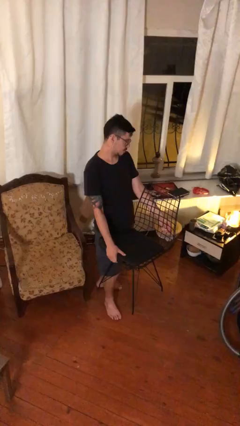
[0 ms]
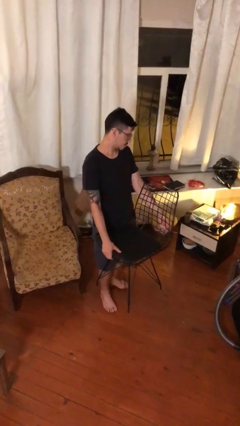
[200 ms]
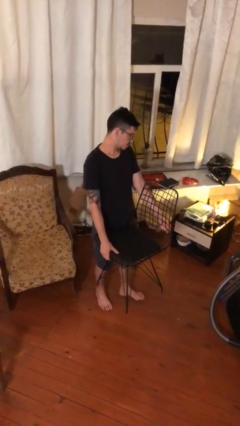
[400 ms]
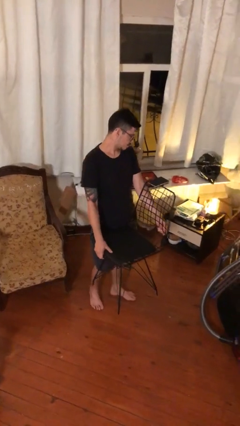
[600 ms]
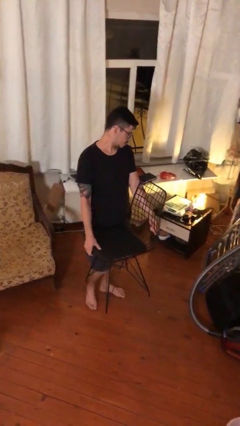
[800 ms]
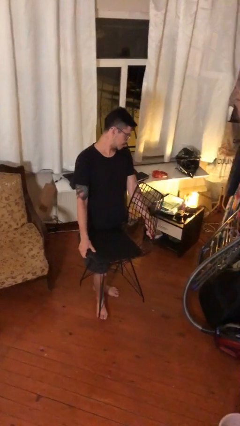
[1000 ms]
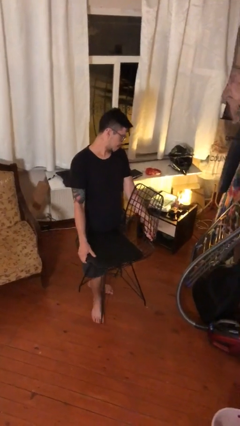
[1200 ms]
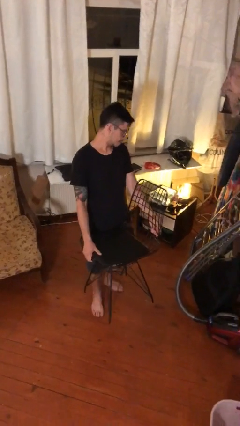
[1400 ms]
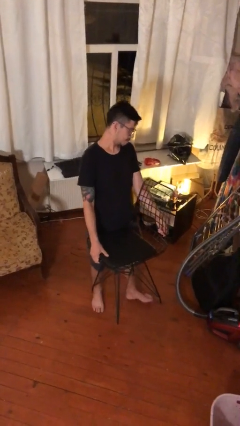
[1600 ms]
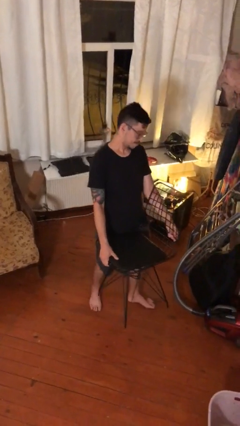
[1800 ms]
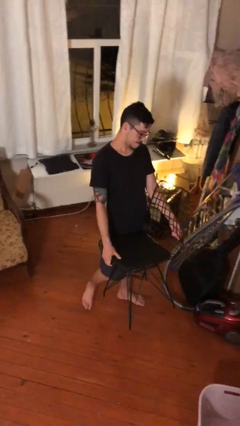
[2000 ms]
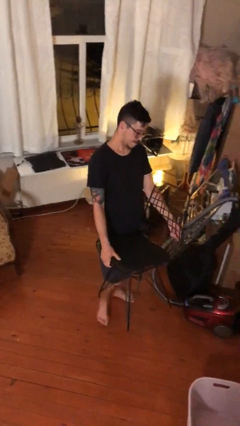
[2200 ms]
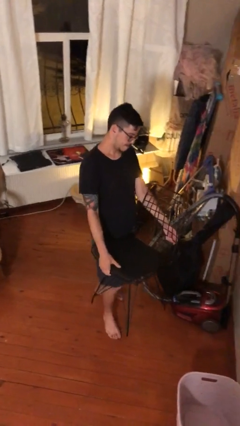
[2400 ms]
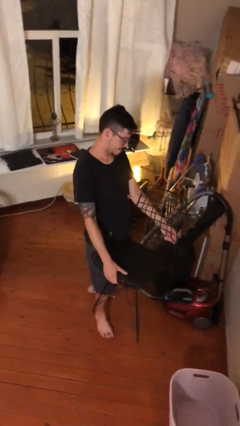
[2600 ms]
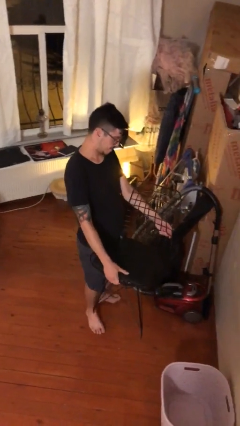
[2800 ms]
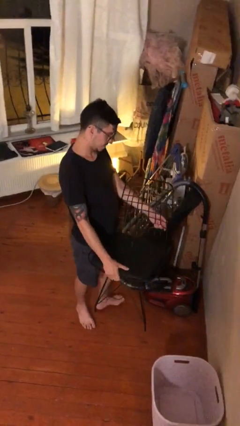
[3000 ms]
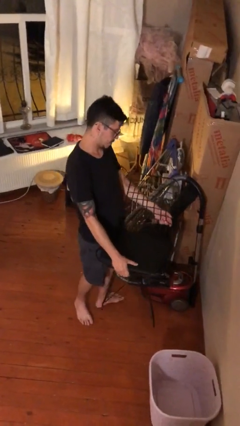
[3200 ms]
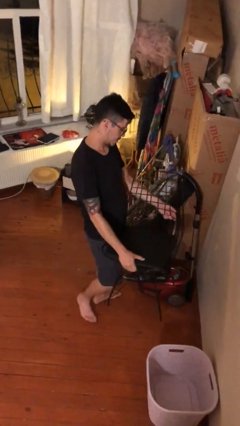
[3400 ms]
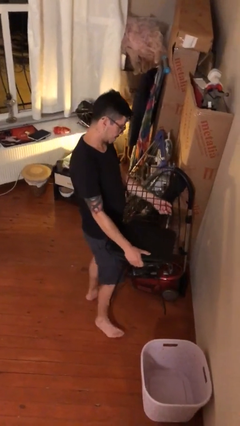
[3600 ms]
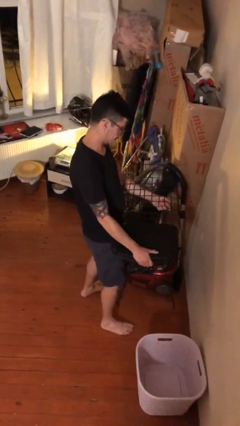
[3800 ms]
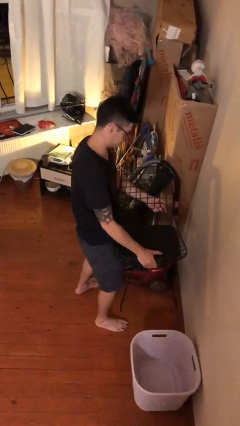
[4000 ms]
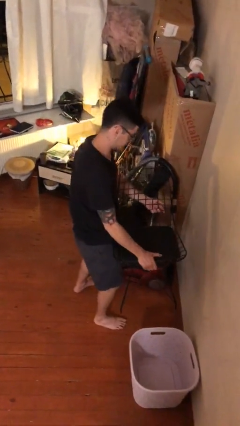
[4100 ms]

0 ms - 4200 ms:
person carries heavy object

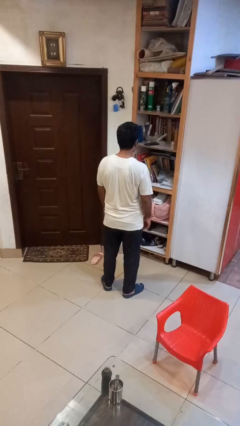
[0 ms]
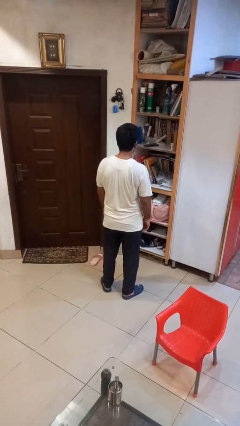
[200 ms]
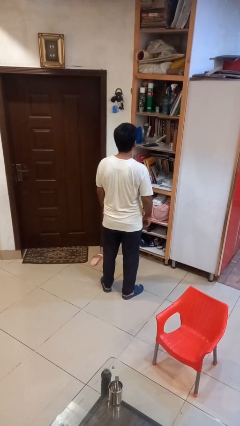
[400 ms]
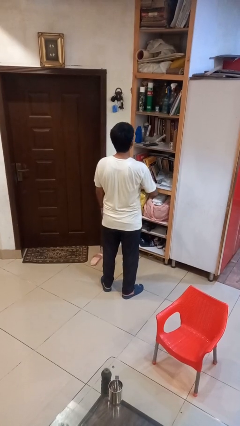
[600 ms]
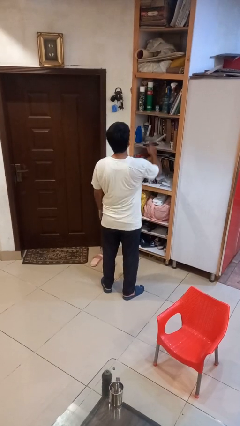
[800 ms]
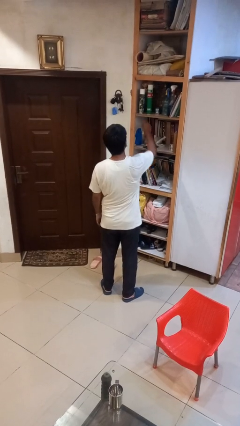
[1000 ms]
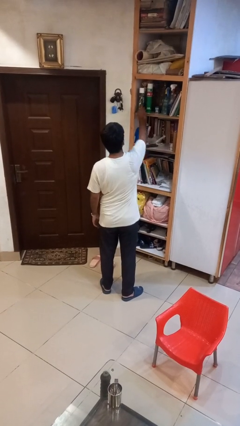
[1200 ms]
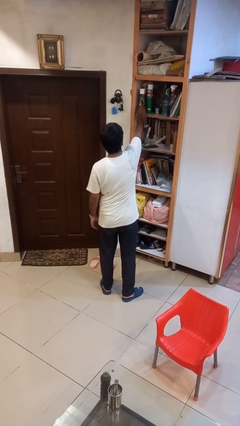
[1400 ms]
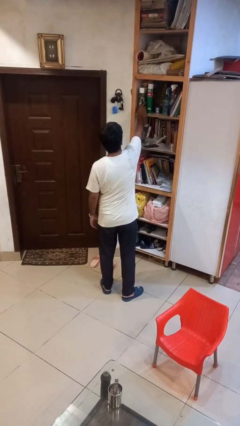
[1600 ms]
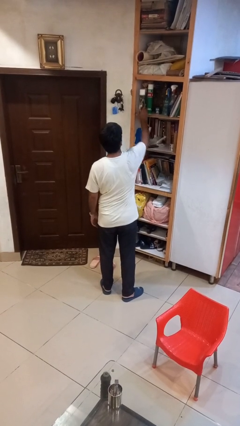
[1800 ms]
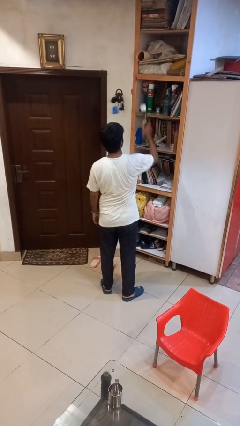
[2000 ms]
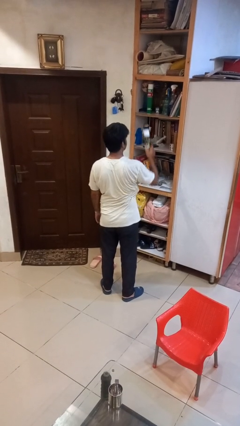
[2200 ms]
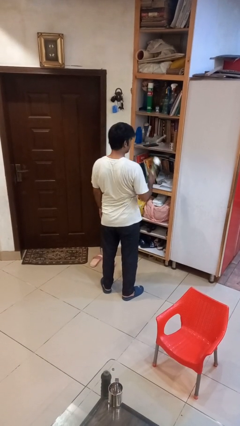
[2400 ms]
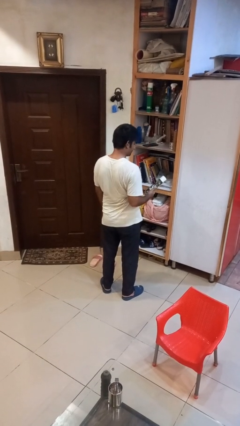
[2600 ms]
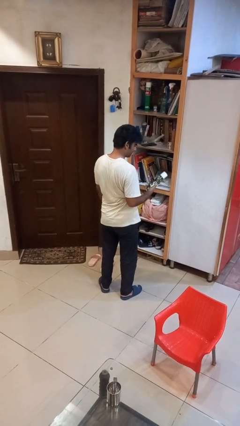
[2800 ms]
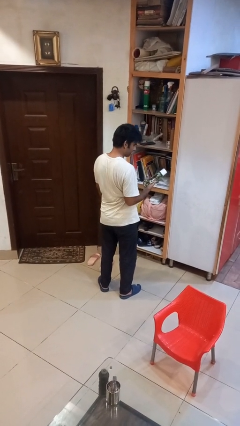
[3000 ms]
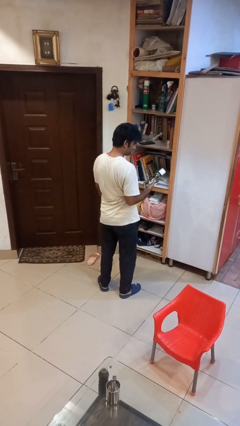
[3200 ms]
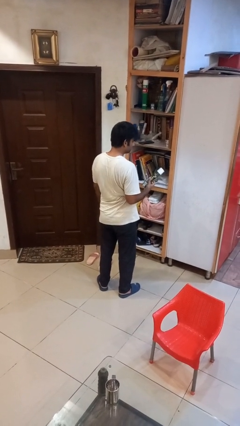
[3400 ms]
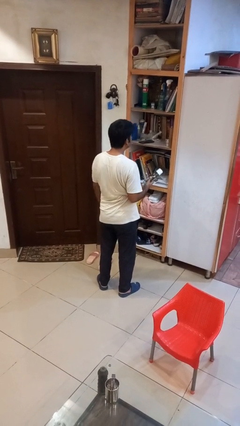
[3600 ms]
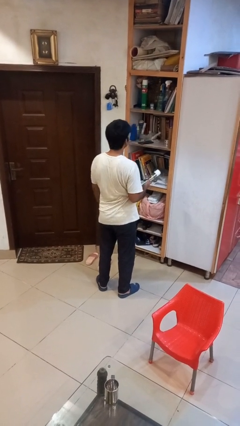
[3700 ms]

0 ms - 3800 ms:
person picks up object from shelf

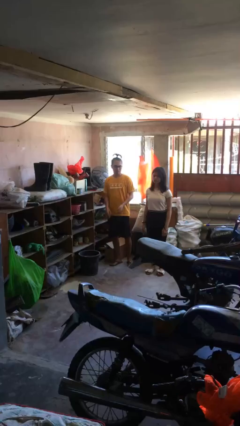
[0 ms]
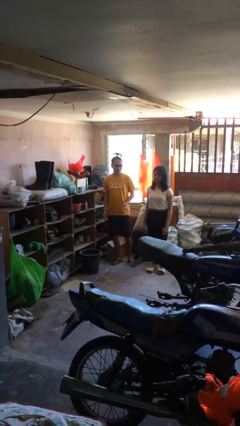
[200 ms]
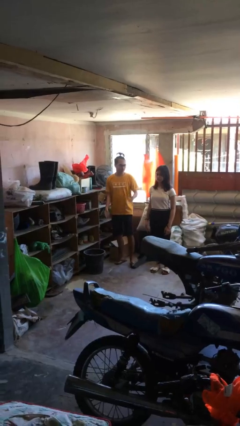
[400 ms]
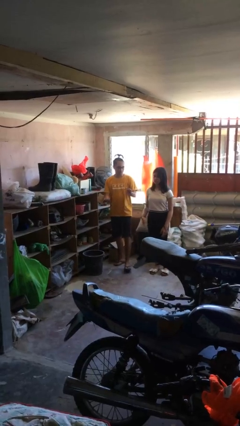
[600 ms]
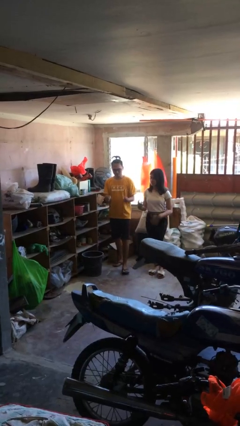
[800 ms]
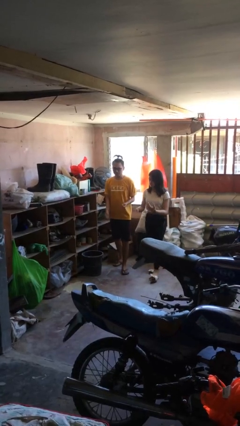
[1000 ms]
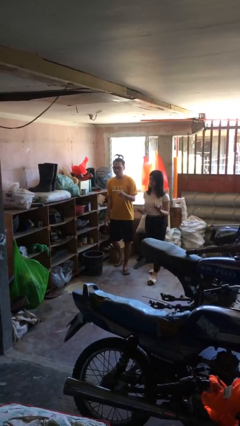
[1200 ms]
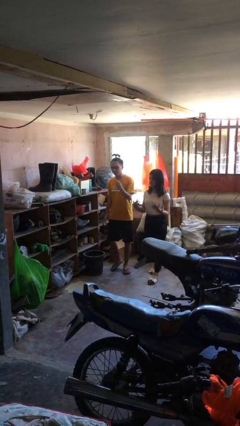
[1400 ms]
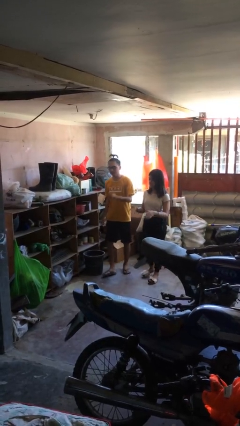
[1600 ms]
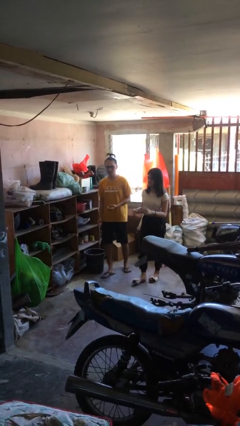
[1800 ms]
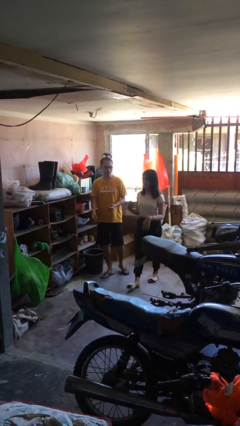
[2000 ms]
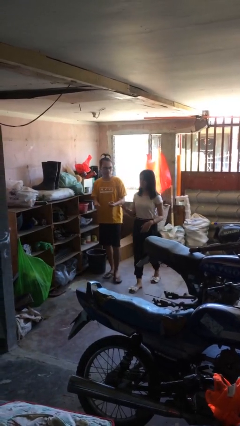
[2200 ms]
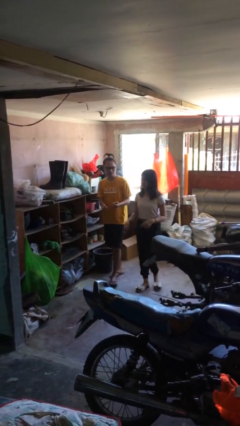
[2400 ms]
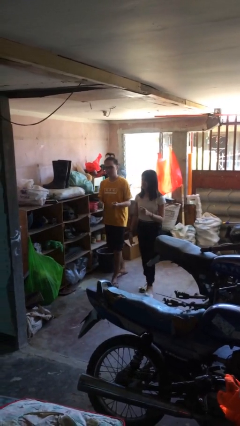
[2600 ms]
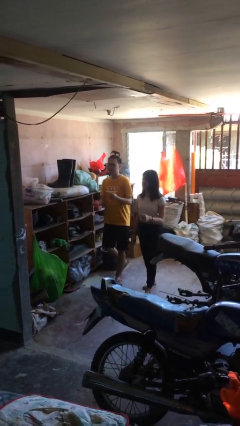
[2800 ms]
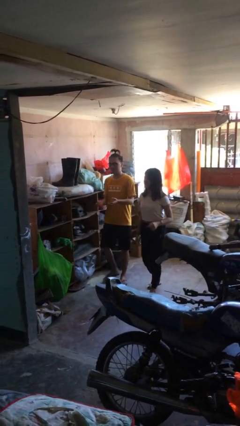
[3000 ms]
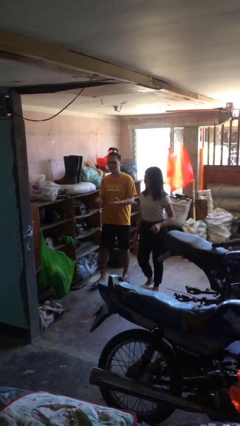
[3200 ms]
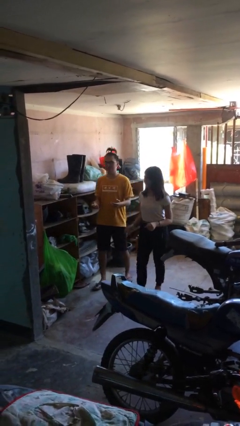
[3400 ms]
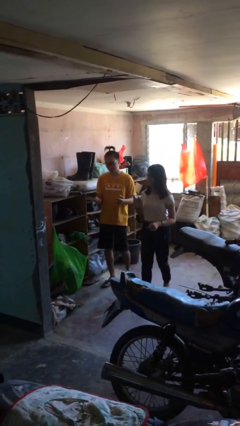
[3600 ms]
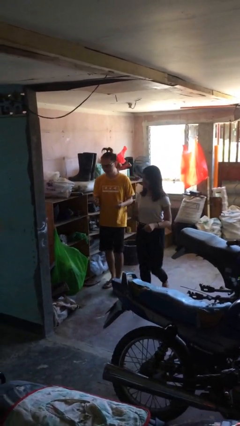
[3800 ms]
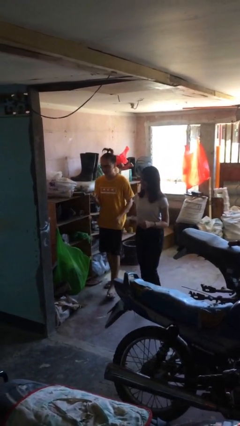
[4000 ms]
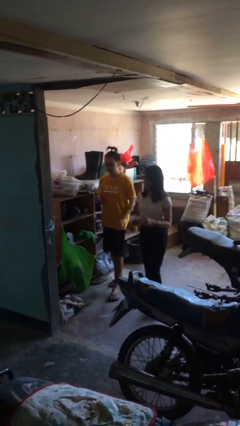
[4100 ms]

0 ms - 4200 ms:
person talks to person

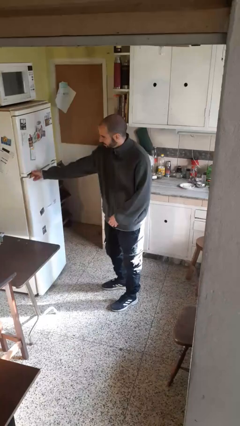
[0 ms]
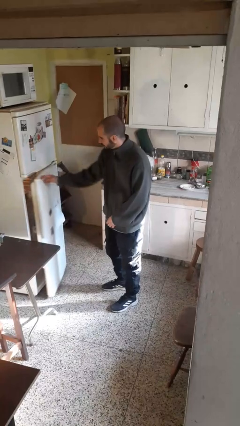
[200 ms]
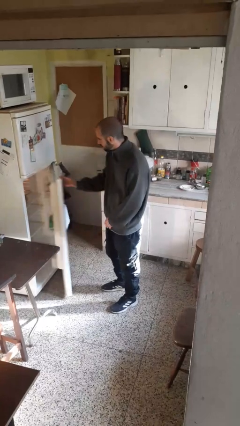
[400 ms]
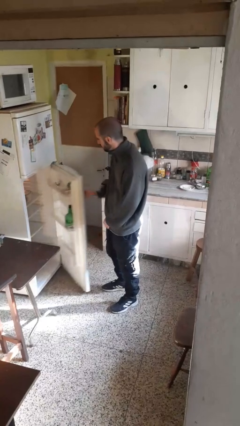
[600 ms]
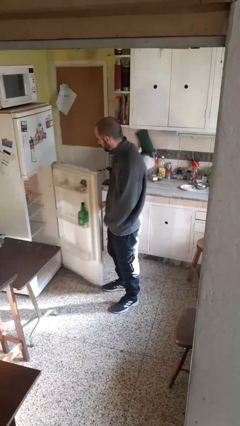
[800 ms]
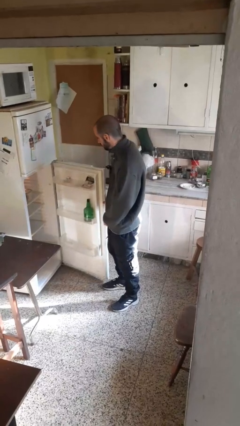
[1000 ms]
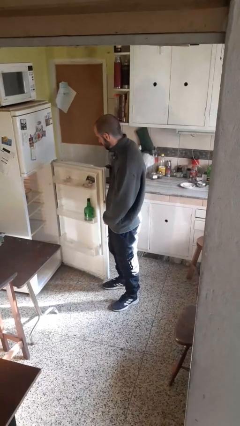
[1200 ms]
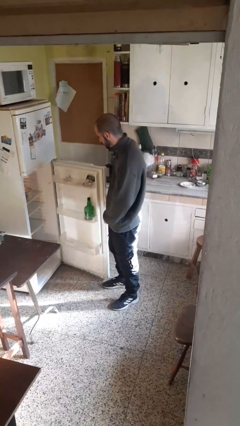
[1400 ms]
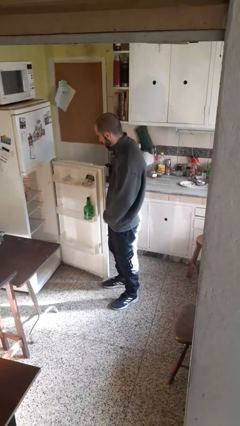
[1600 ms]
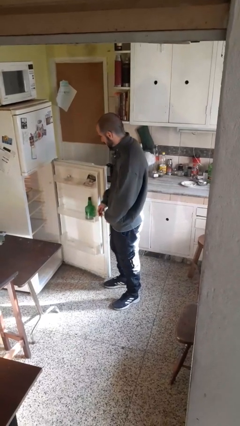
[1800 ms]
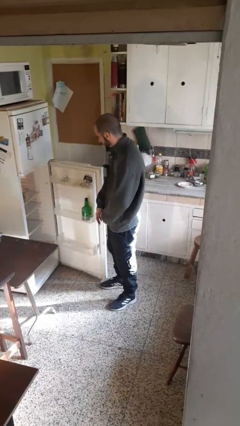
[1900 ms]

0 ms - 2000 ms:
person opens refrigerator

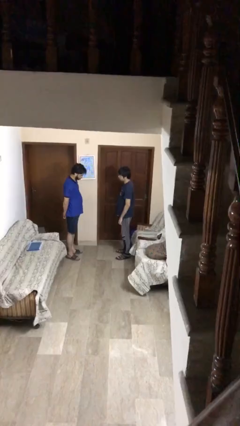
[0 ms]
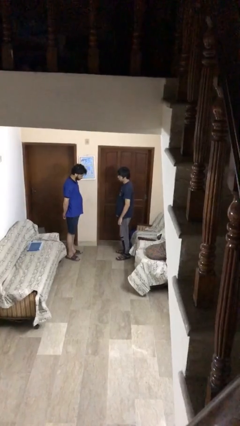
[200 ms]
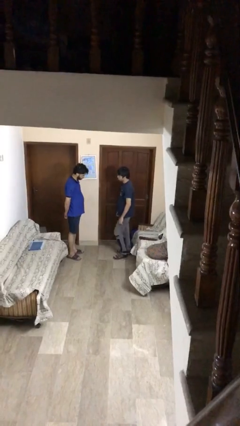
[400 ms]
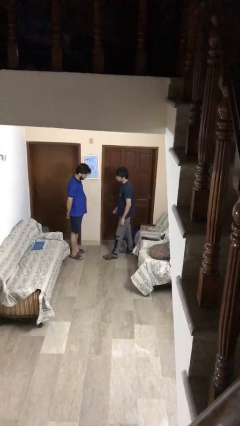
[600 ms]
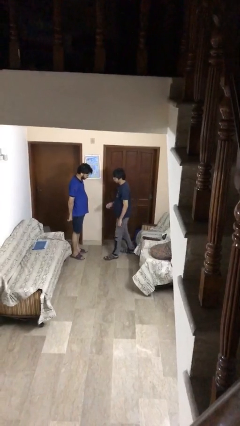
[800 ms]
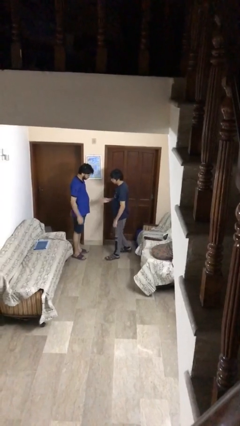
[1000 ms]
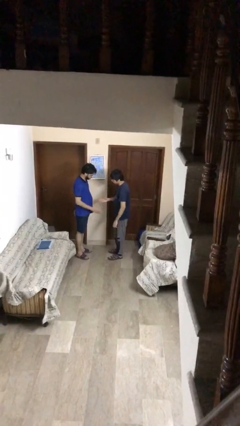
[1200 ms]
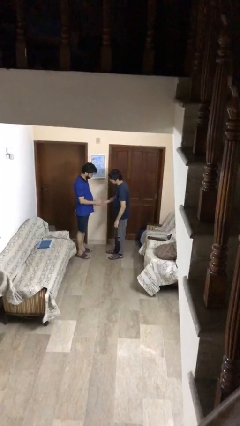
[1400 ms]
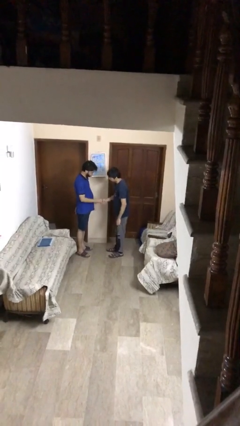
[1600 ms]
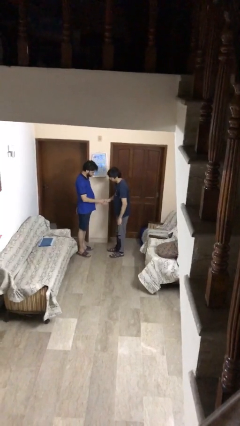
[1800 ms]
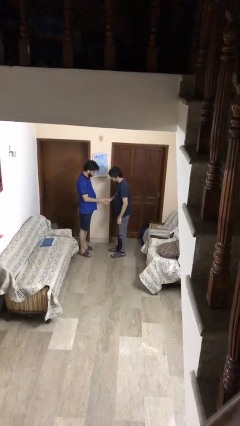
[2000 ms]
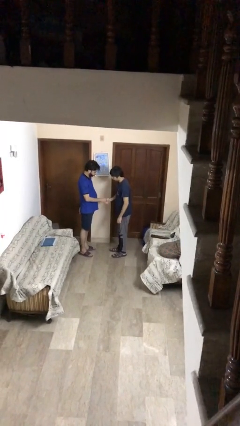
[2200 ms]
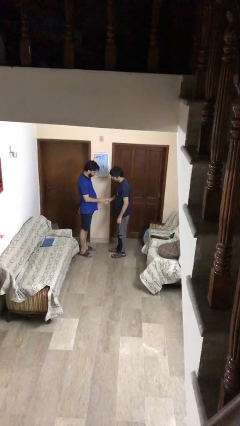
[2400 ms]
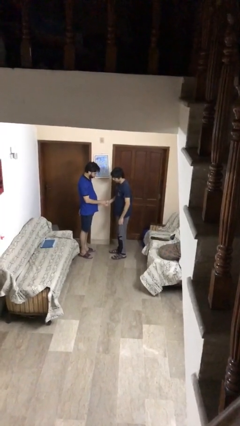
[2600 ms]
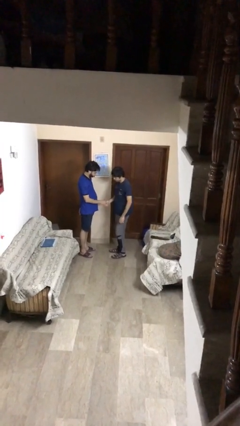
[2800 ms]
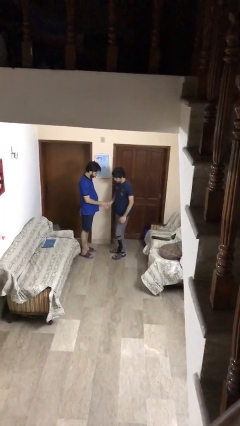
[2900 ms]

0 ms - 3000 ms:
person shakes hand

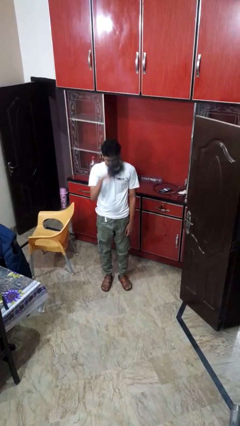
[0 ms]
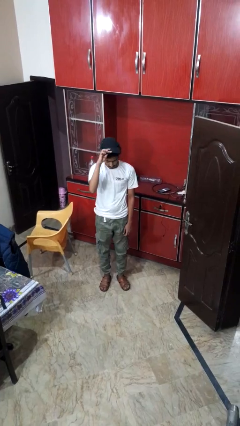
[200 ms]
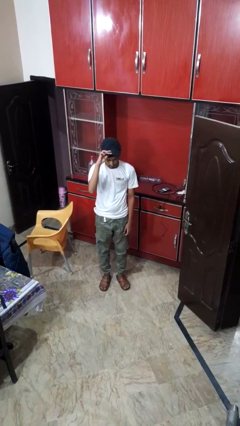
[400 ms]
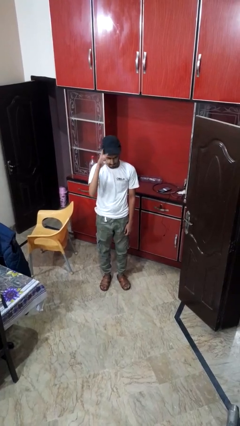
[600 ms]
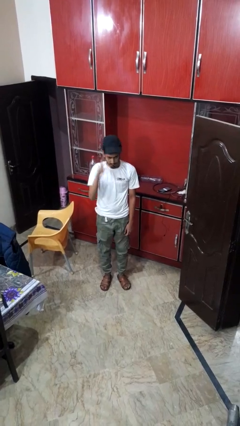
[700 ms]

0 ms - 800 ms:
person puts on hat
